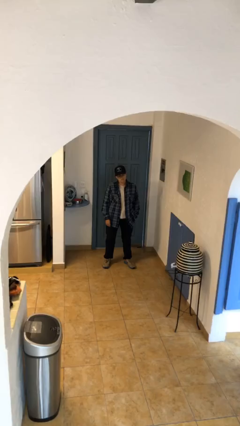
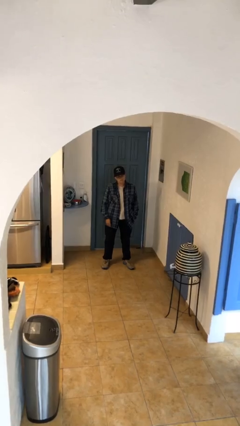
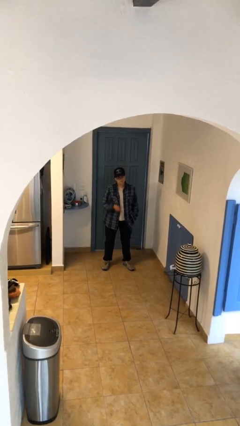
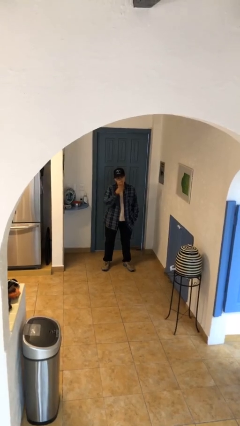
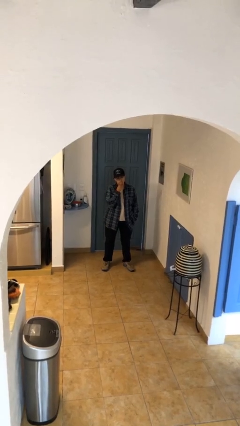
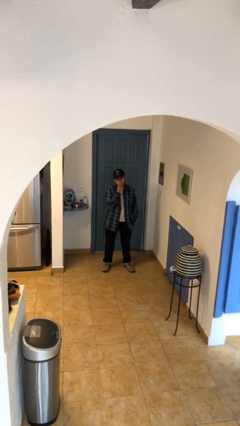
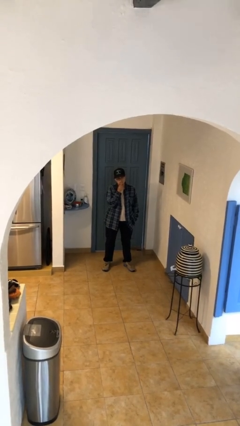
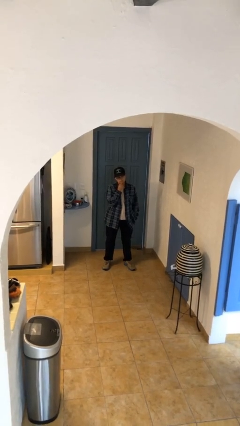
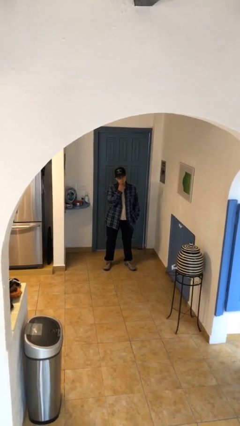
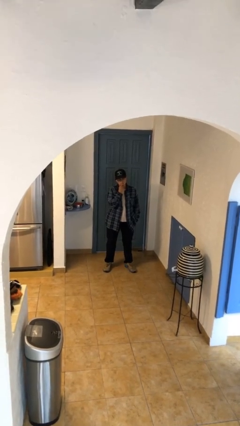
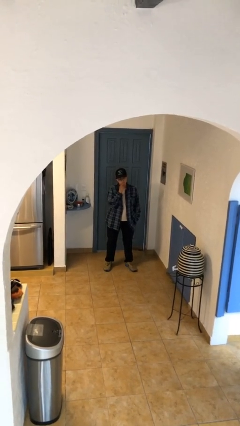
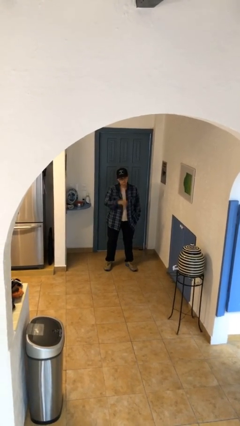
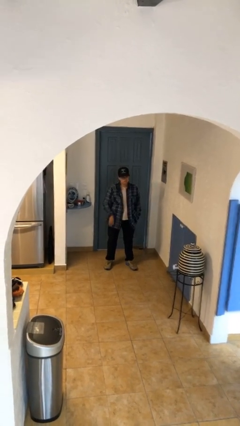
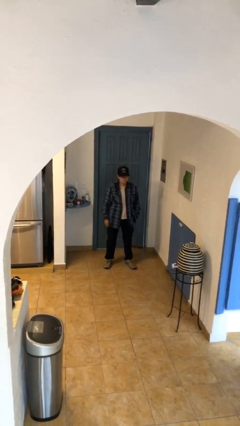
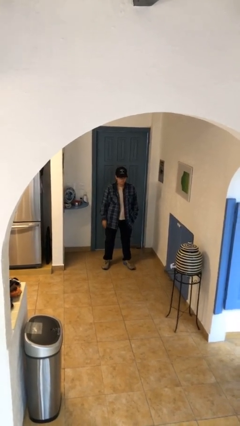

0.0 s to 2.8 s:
person strokes chin

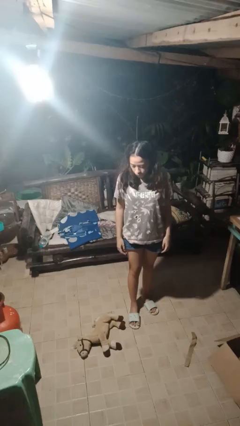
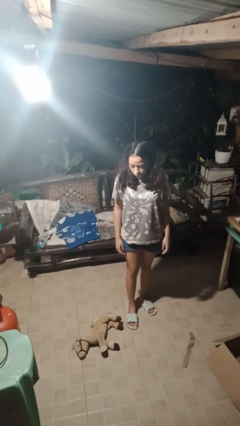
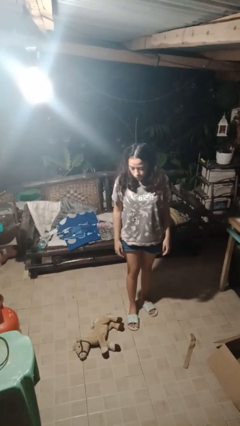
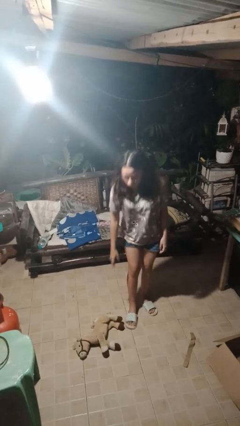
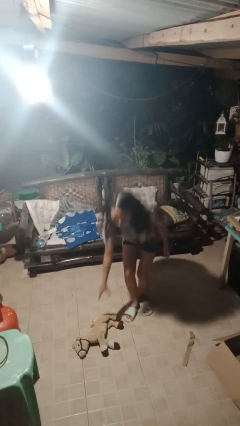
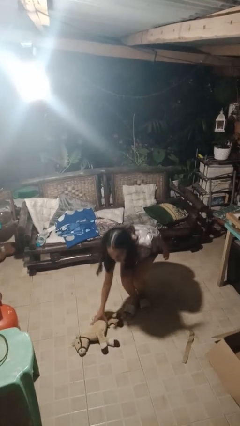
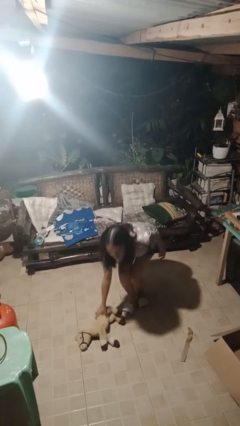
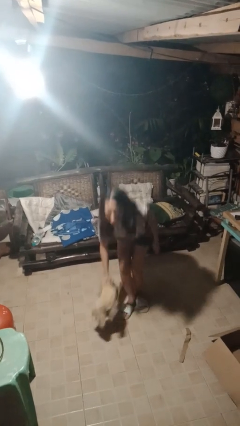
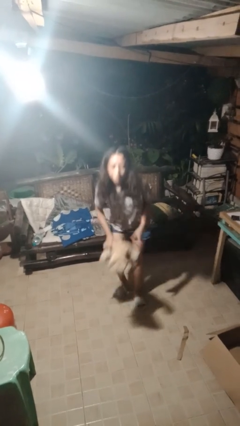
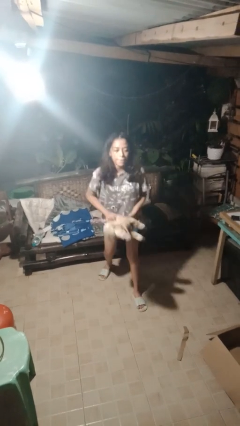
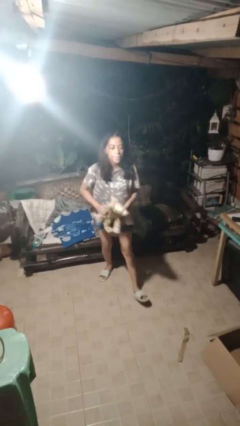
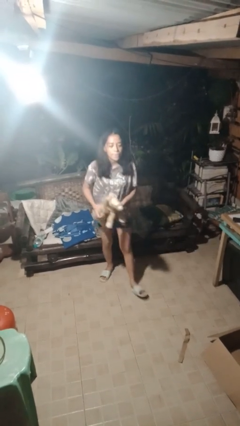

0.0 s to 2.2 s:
person picks up object from floor

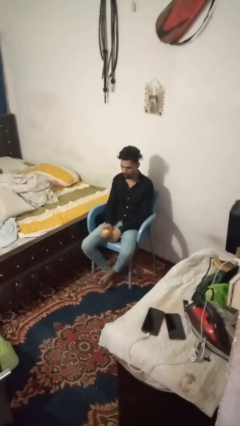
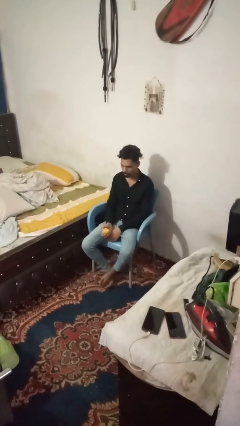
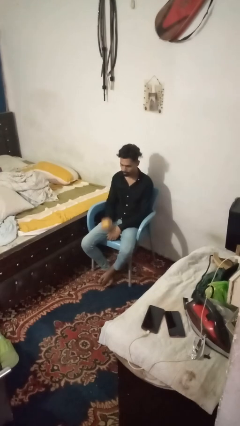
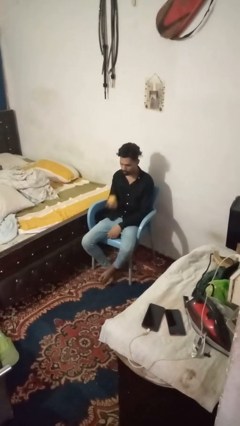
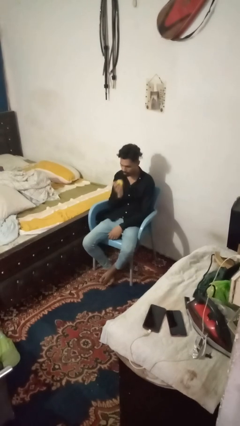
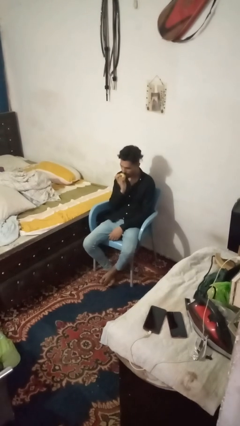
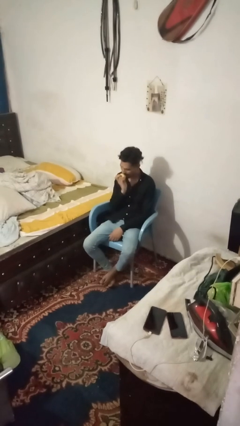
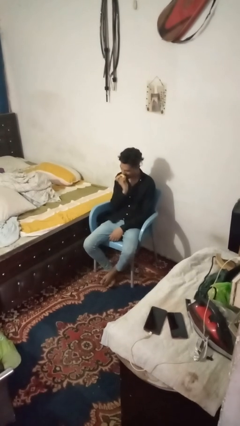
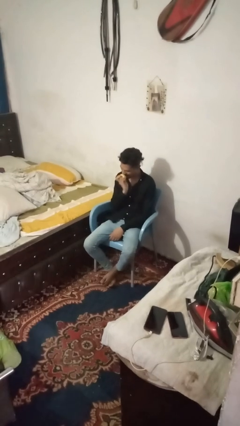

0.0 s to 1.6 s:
person eats apple

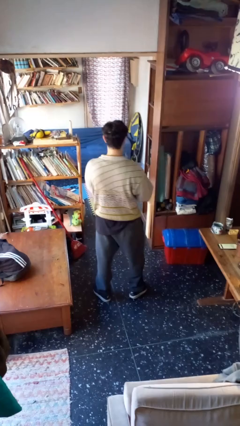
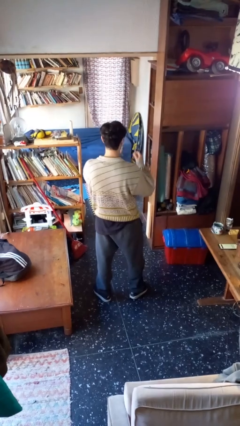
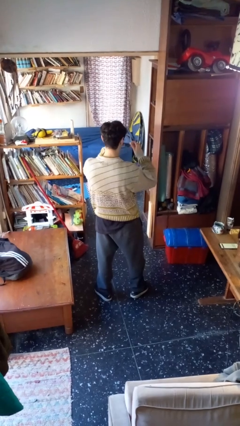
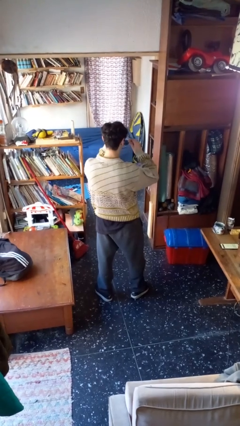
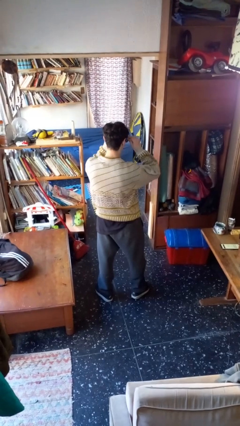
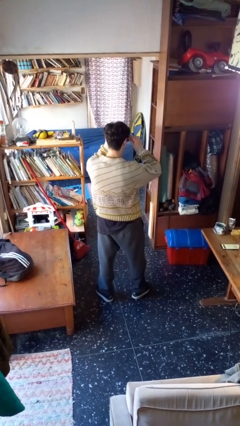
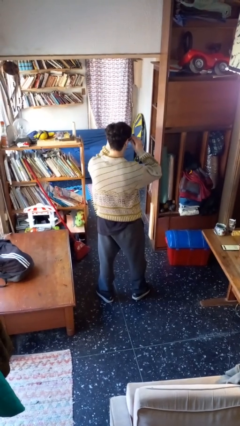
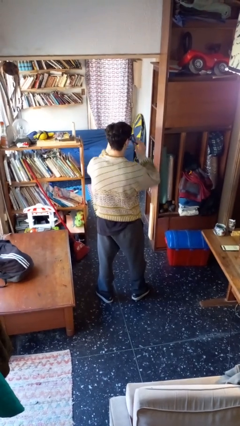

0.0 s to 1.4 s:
person puts on sunglasses

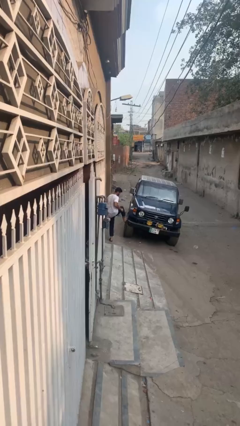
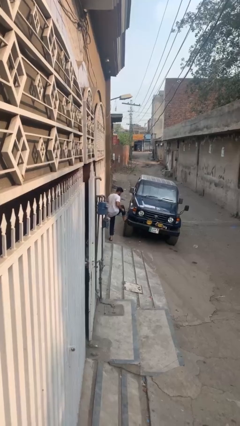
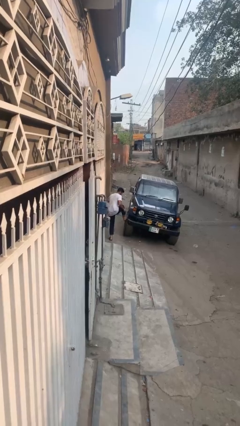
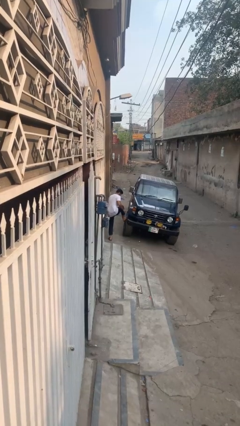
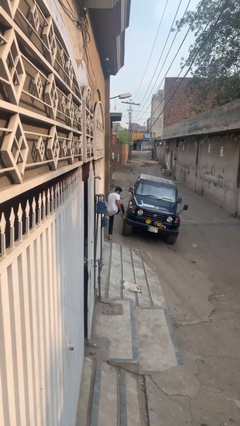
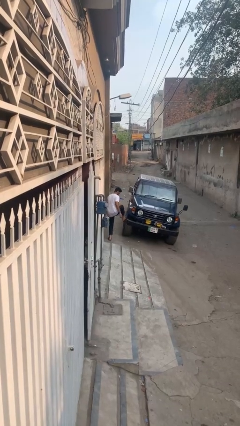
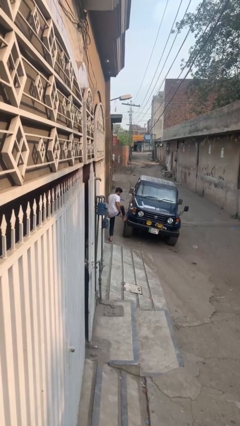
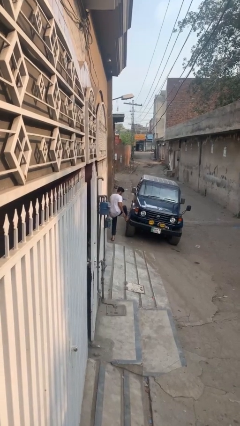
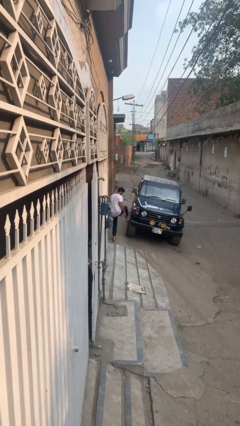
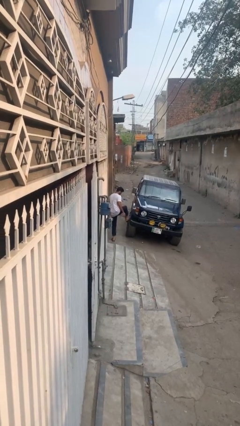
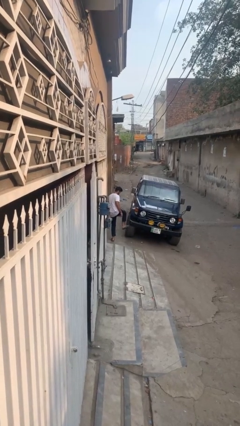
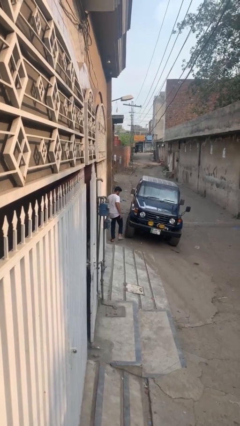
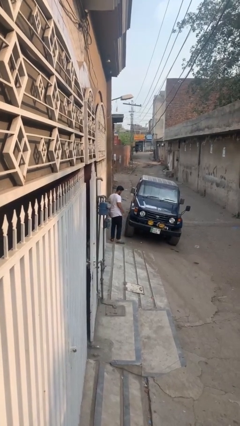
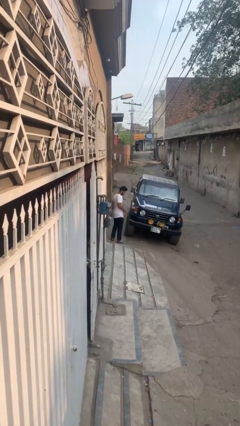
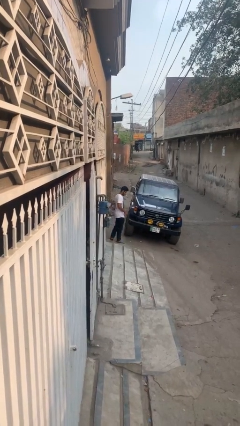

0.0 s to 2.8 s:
person kicks car tires

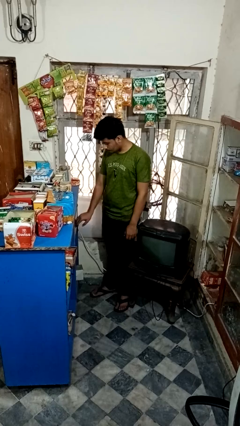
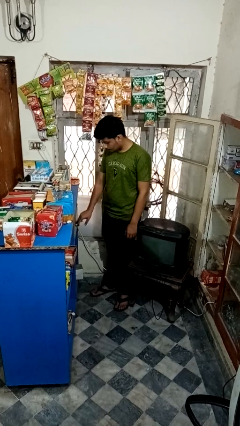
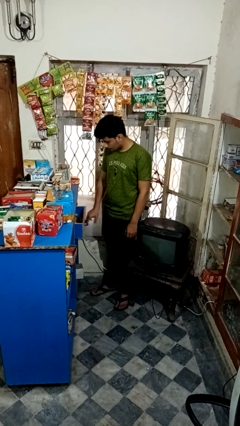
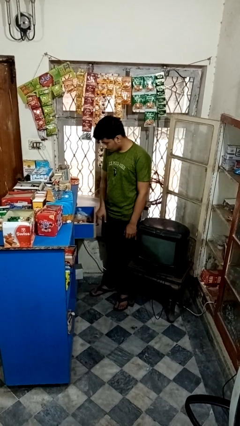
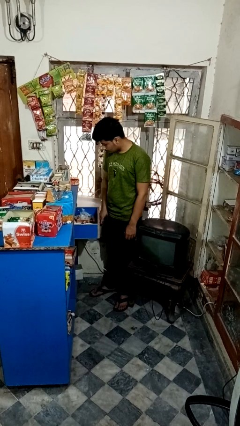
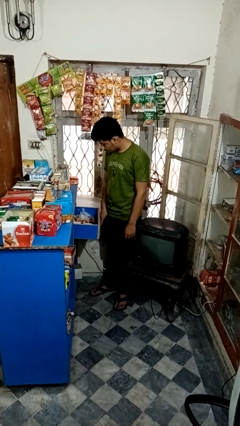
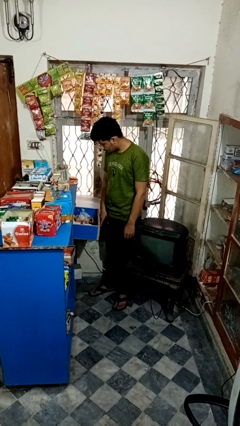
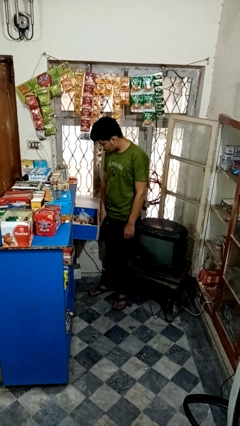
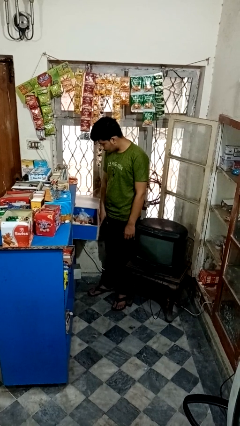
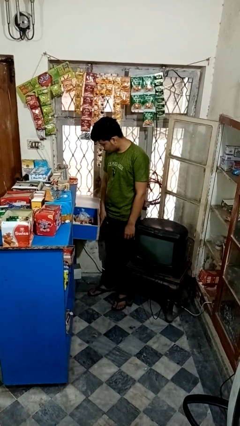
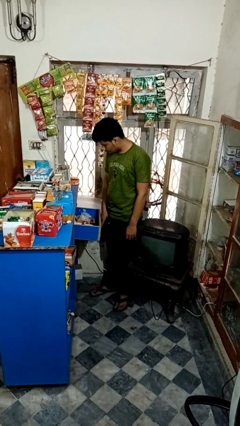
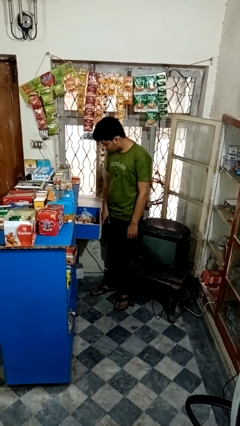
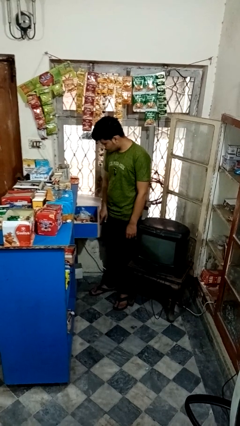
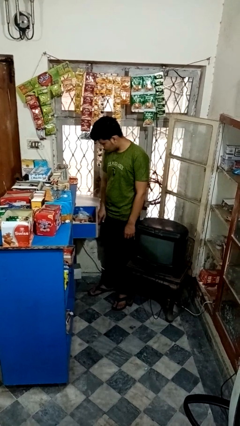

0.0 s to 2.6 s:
person opens kitchen drawer

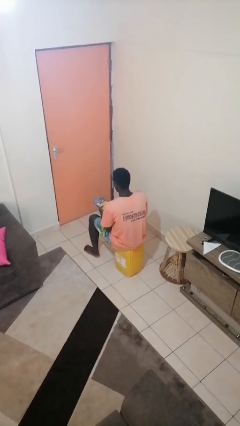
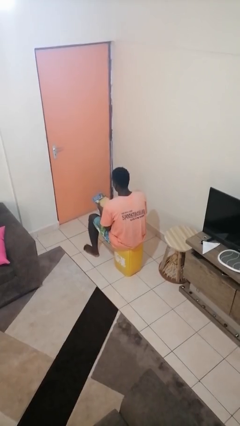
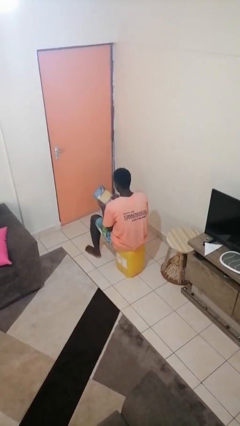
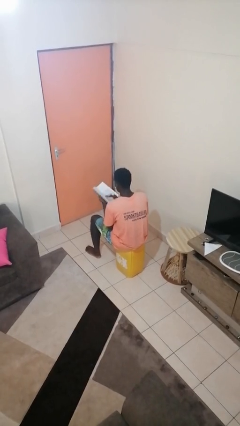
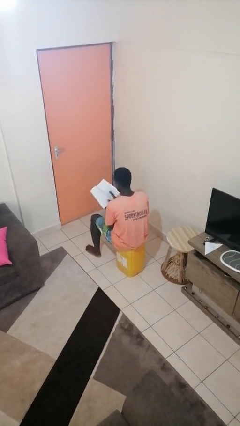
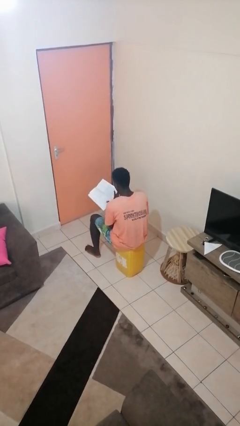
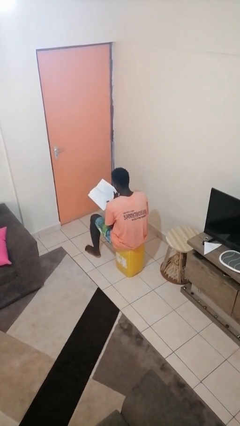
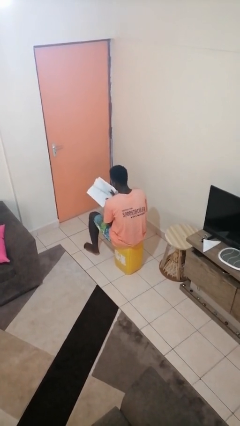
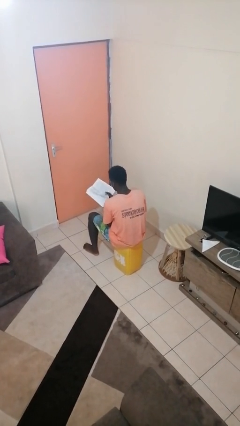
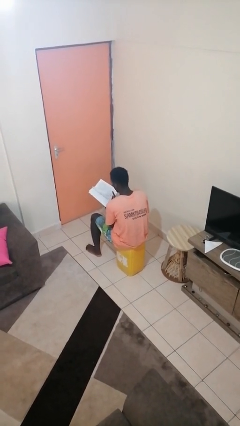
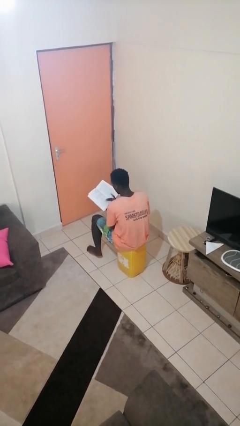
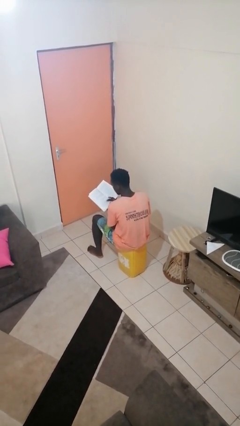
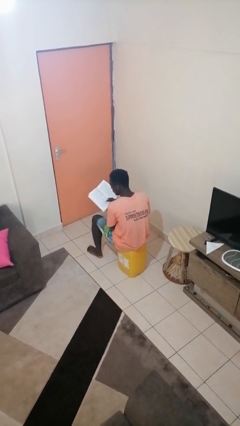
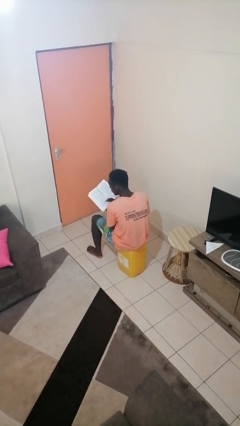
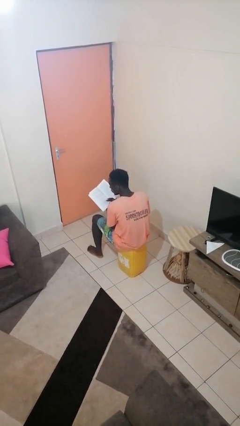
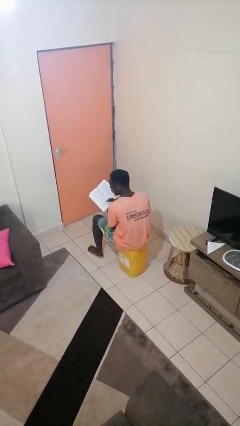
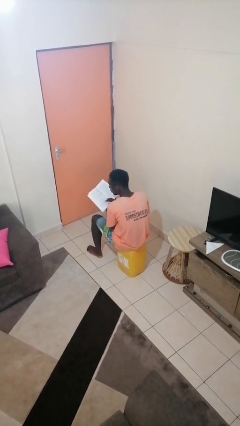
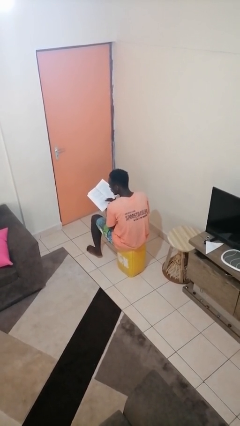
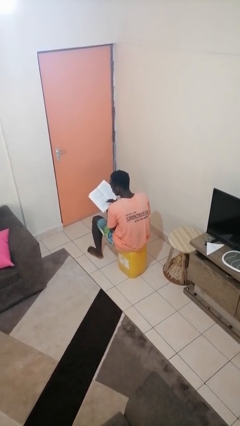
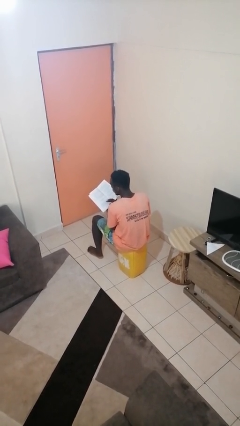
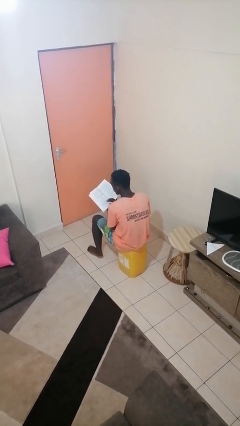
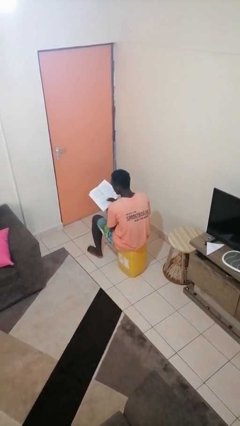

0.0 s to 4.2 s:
person reads book
